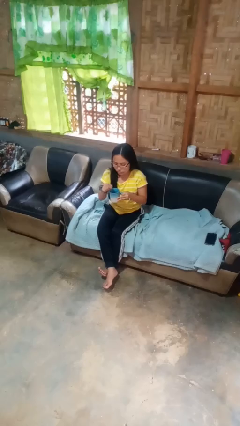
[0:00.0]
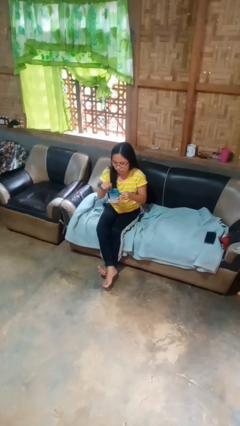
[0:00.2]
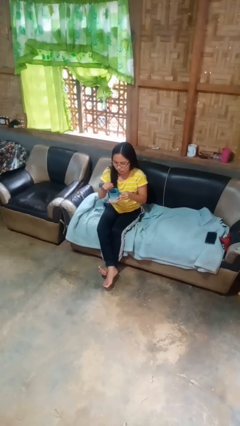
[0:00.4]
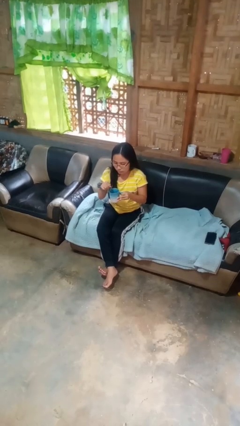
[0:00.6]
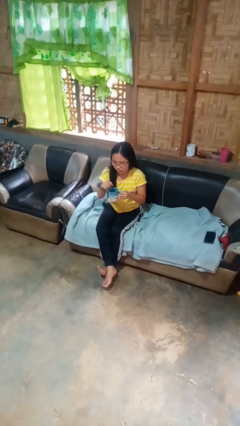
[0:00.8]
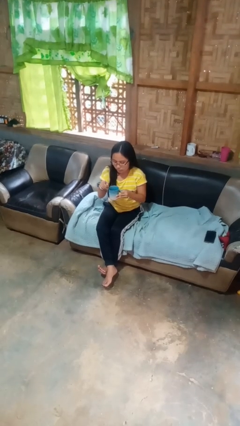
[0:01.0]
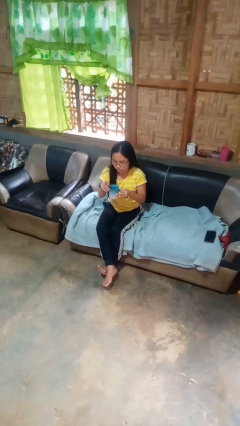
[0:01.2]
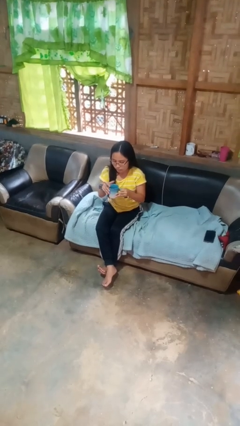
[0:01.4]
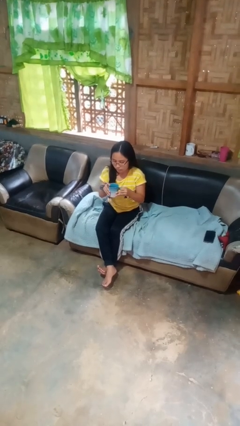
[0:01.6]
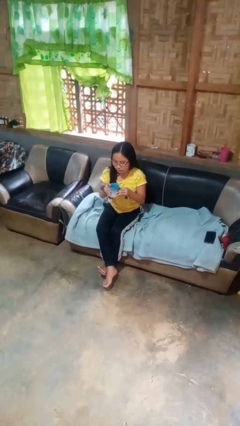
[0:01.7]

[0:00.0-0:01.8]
person stirs mug

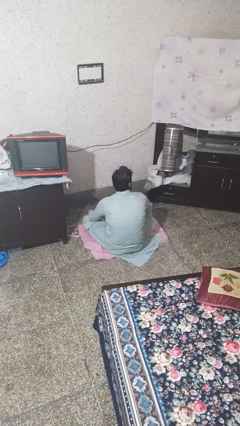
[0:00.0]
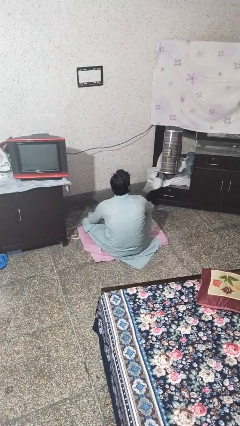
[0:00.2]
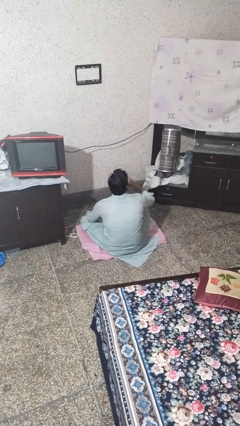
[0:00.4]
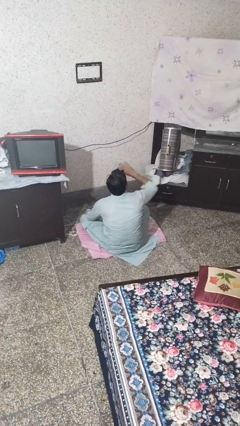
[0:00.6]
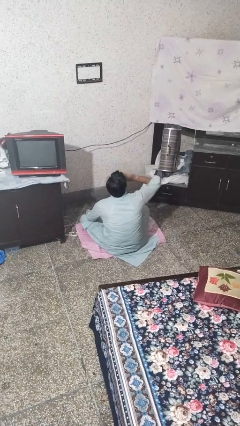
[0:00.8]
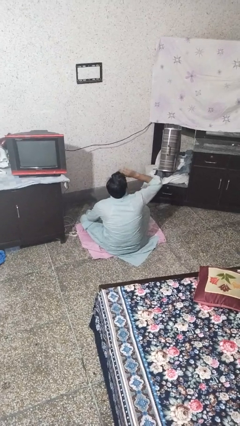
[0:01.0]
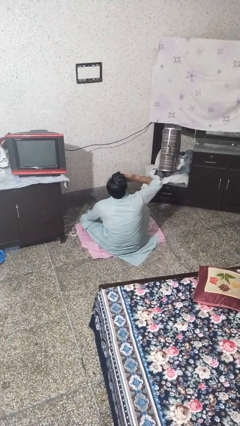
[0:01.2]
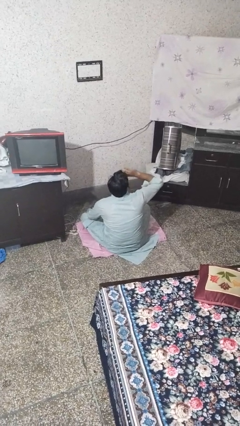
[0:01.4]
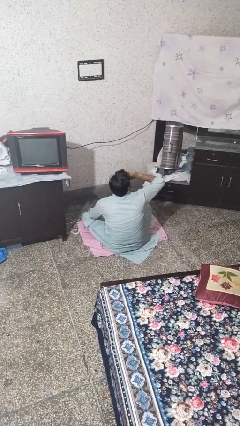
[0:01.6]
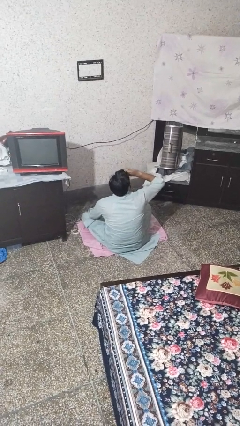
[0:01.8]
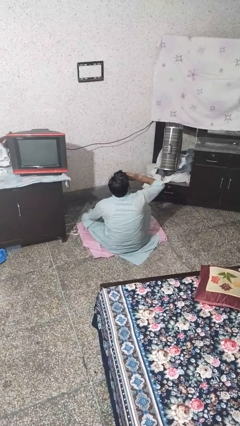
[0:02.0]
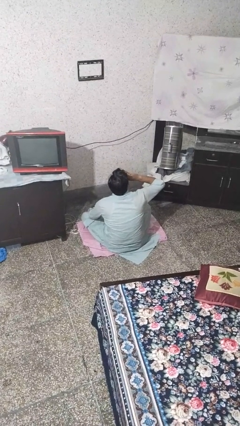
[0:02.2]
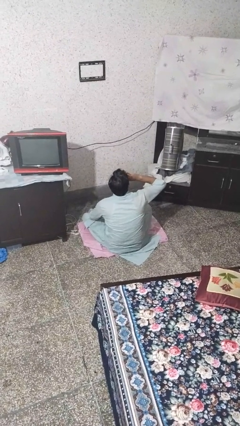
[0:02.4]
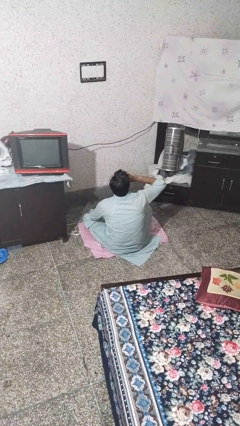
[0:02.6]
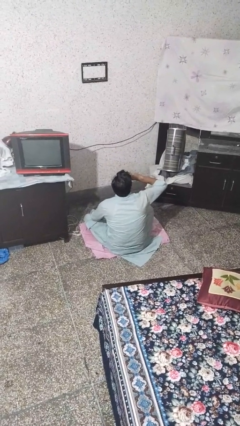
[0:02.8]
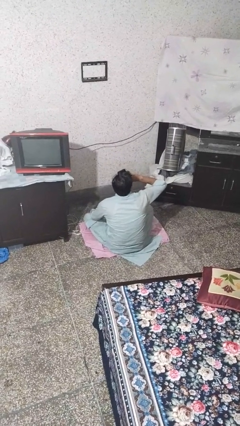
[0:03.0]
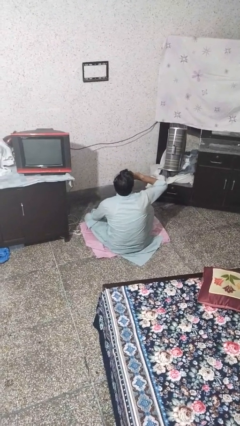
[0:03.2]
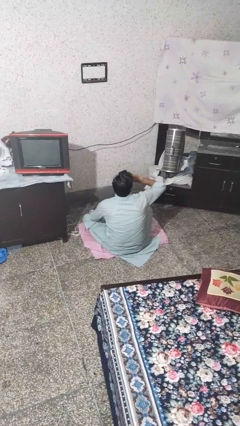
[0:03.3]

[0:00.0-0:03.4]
person yawns

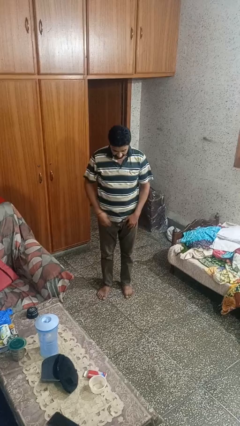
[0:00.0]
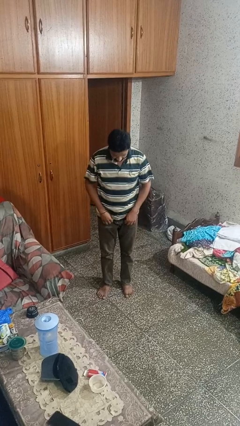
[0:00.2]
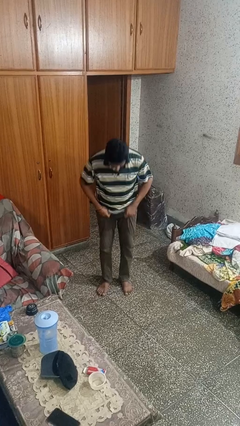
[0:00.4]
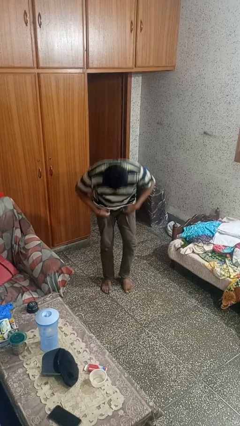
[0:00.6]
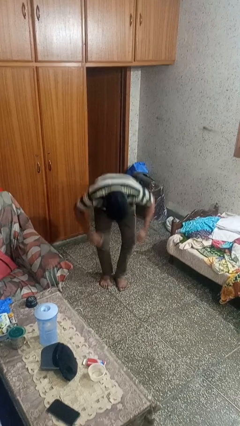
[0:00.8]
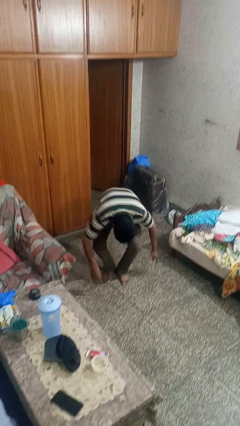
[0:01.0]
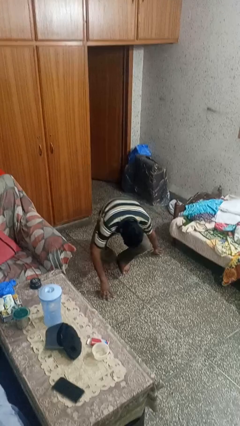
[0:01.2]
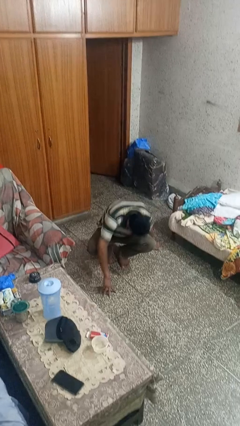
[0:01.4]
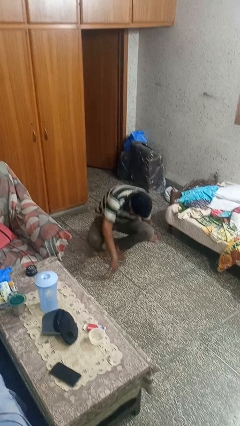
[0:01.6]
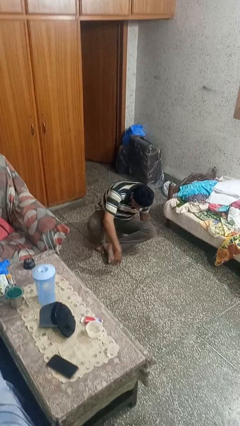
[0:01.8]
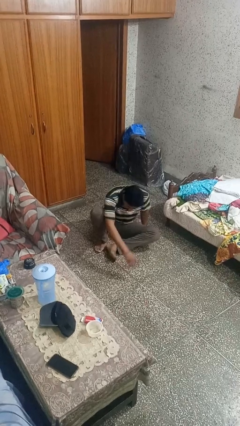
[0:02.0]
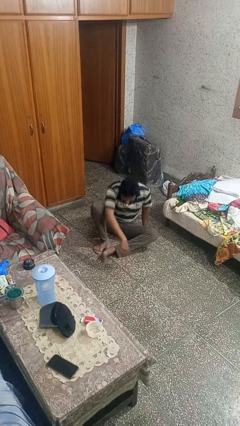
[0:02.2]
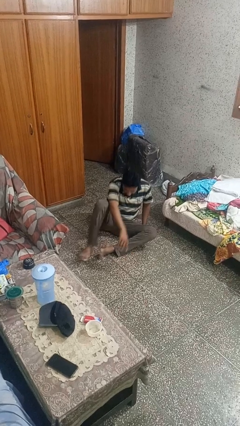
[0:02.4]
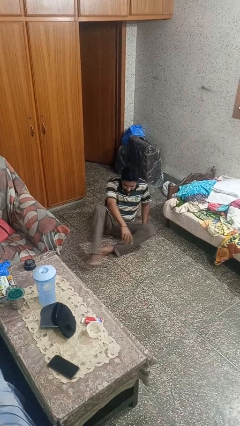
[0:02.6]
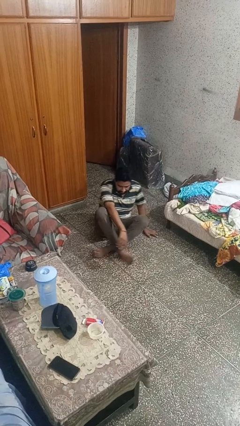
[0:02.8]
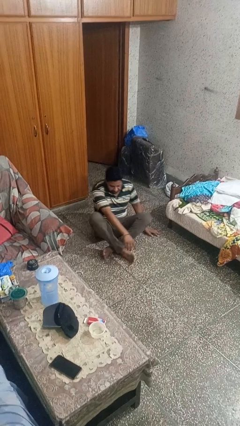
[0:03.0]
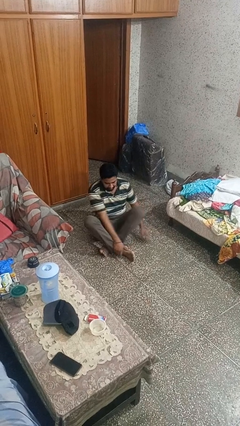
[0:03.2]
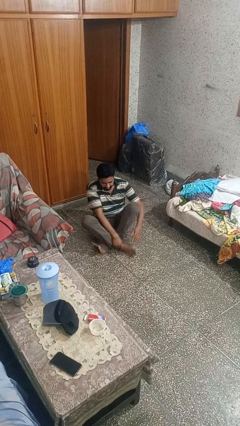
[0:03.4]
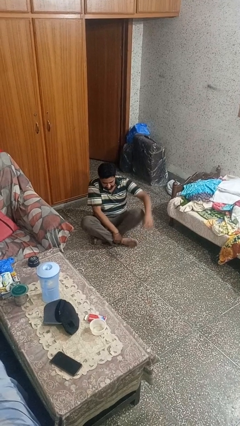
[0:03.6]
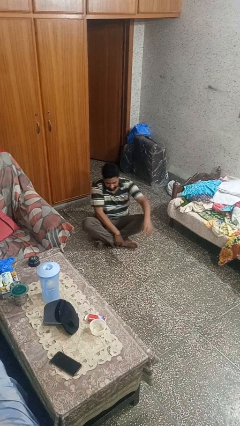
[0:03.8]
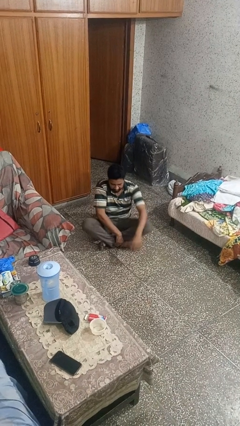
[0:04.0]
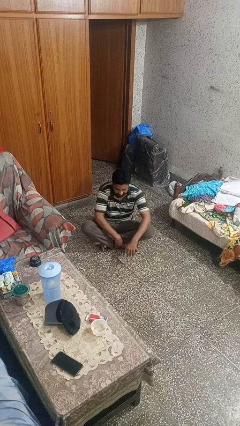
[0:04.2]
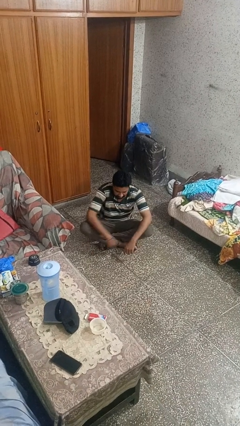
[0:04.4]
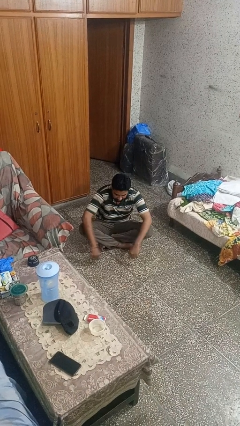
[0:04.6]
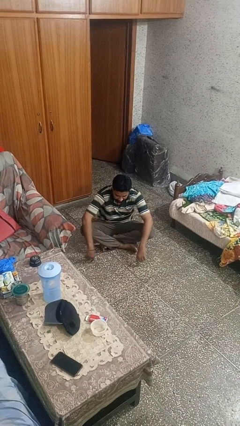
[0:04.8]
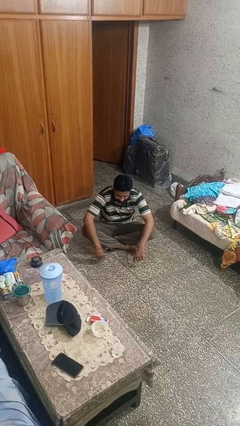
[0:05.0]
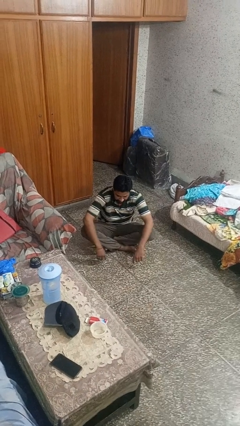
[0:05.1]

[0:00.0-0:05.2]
person sits crisscross

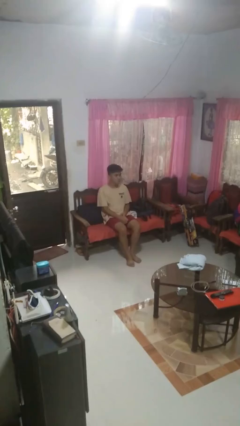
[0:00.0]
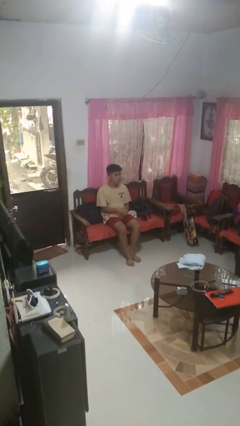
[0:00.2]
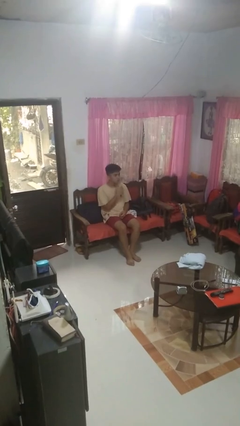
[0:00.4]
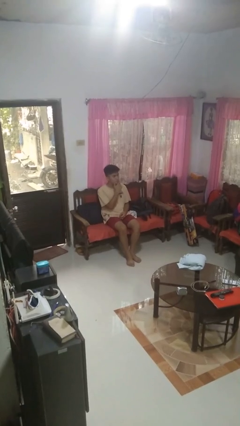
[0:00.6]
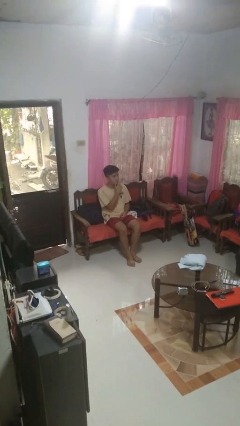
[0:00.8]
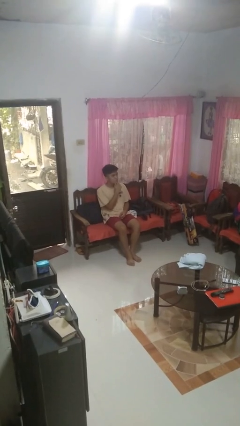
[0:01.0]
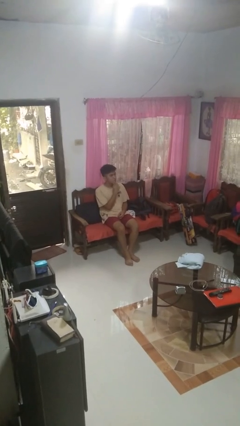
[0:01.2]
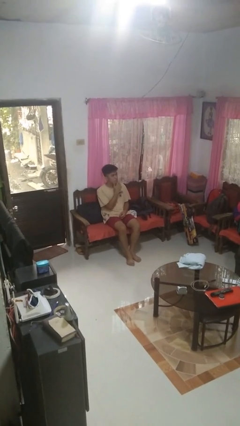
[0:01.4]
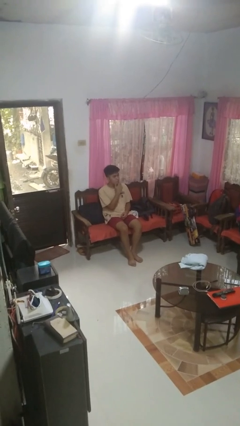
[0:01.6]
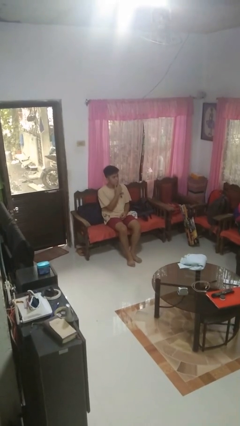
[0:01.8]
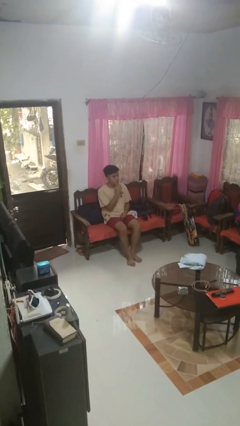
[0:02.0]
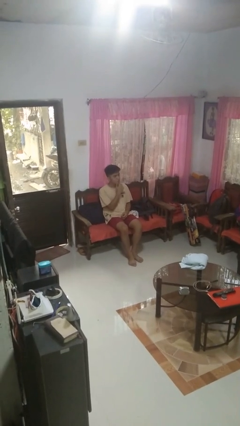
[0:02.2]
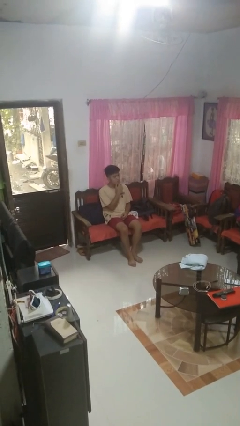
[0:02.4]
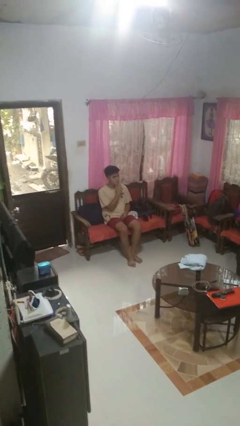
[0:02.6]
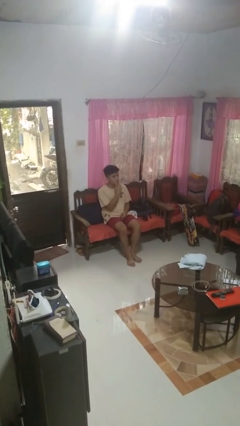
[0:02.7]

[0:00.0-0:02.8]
person strokes chin

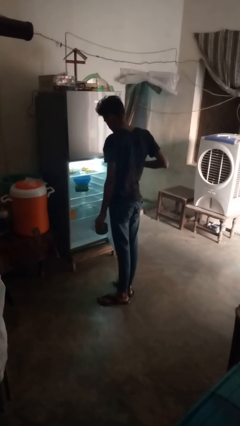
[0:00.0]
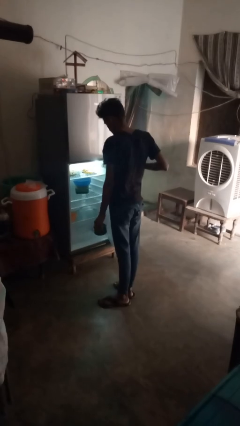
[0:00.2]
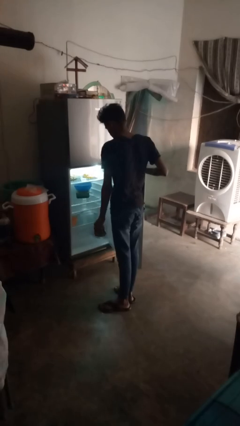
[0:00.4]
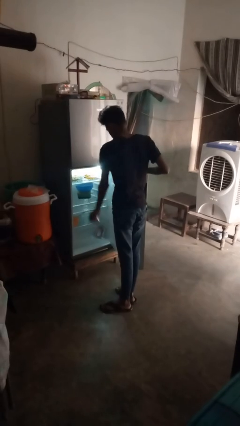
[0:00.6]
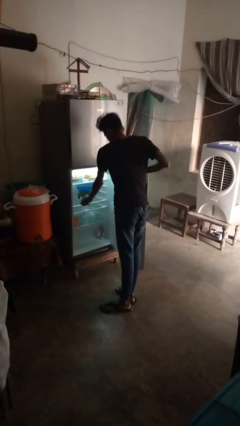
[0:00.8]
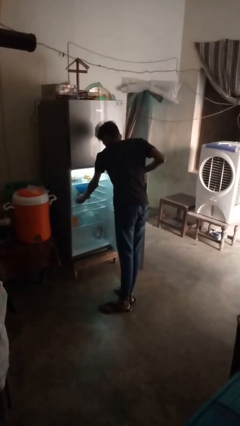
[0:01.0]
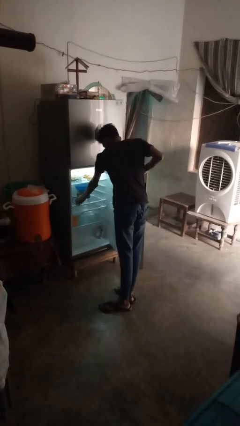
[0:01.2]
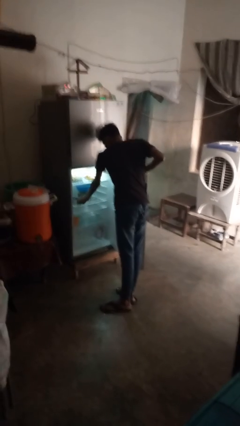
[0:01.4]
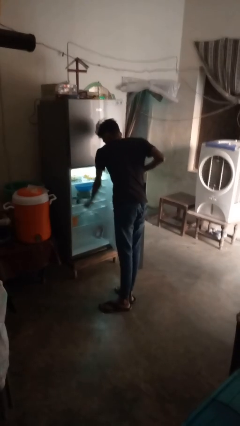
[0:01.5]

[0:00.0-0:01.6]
person puts object into refrigerator

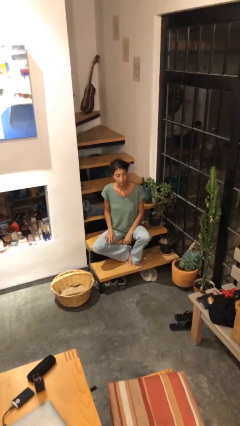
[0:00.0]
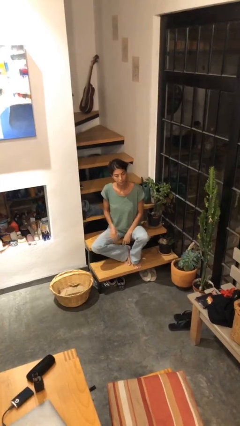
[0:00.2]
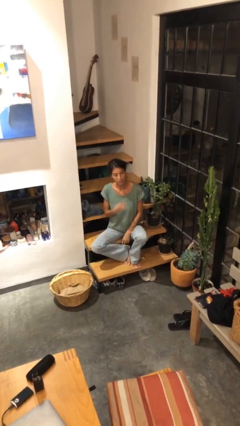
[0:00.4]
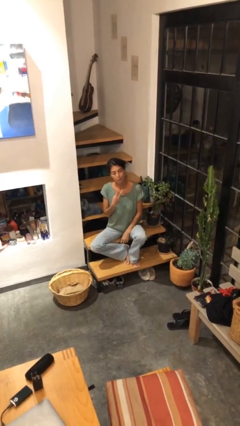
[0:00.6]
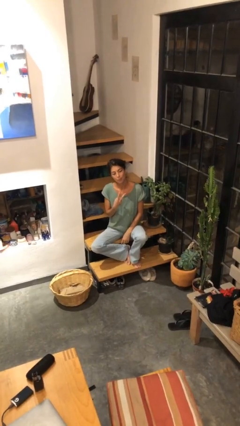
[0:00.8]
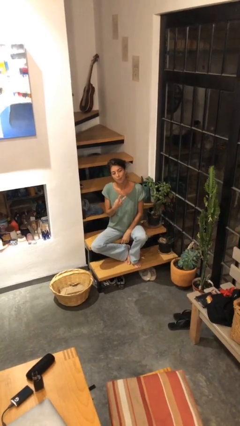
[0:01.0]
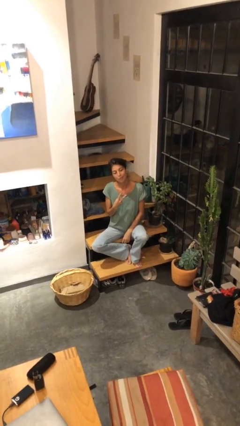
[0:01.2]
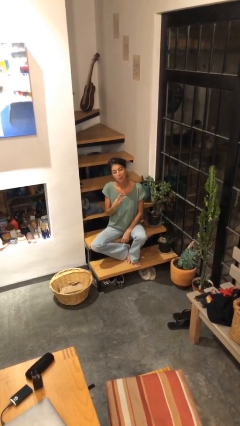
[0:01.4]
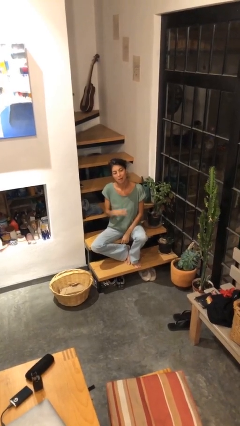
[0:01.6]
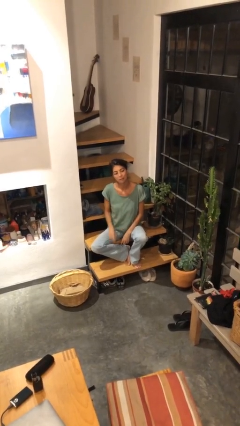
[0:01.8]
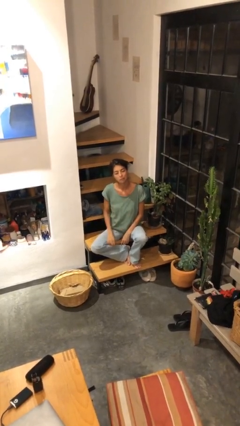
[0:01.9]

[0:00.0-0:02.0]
person gestures peace

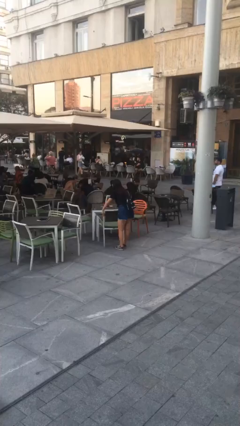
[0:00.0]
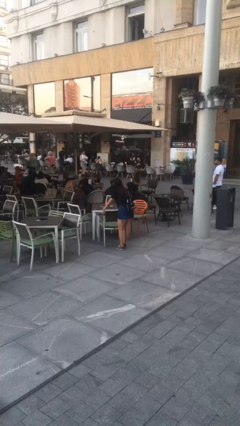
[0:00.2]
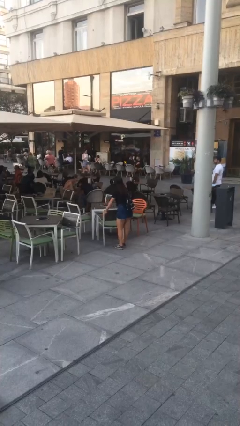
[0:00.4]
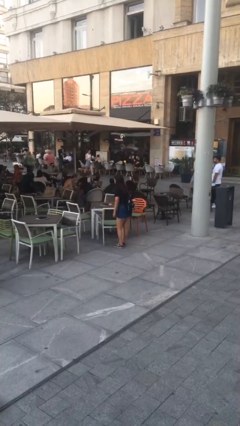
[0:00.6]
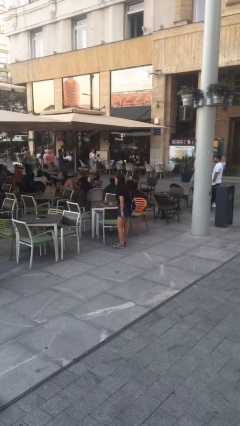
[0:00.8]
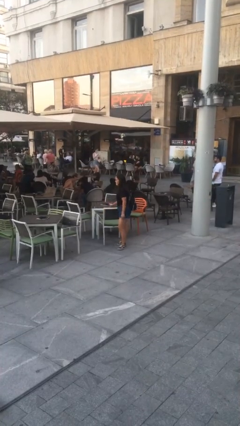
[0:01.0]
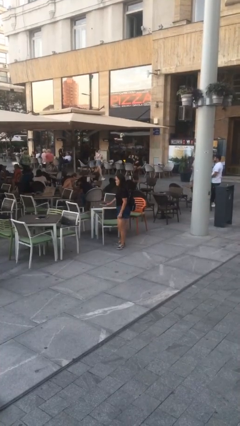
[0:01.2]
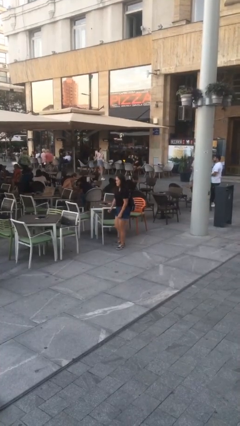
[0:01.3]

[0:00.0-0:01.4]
person puts down object on floor
